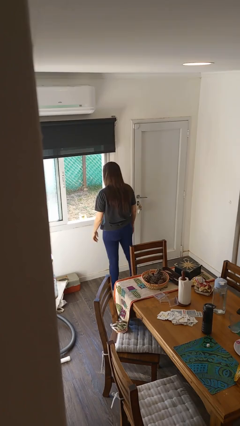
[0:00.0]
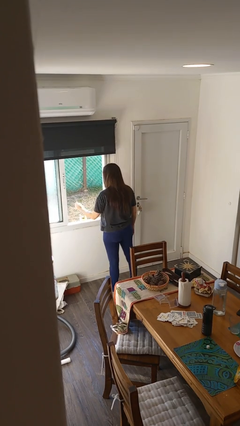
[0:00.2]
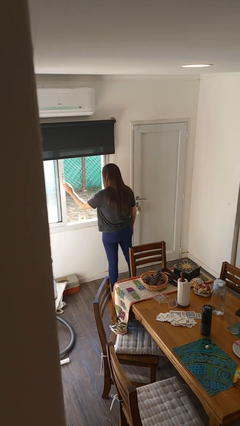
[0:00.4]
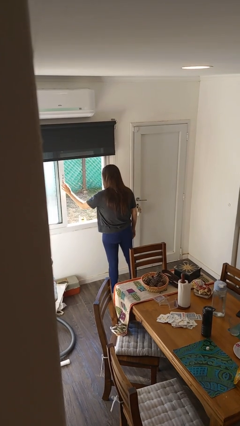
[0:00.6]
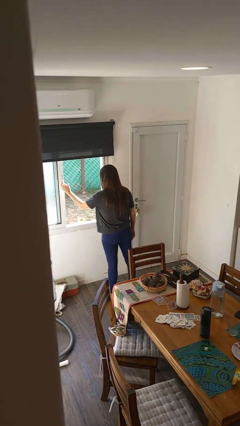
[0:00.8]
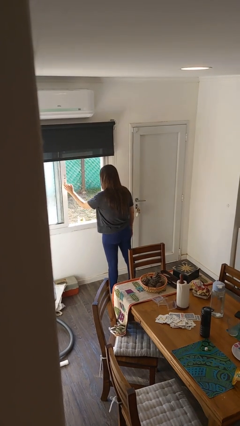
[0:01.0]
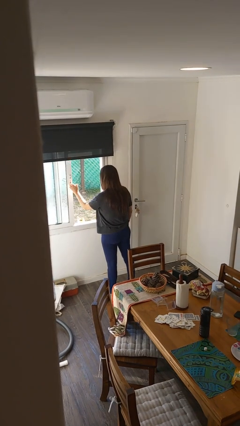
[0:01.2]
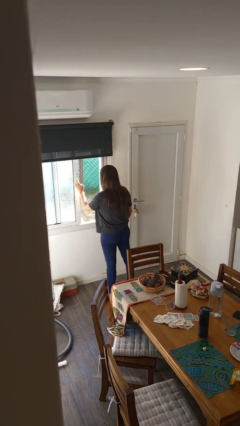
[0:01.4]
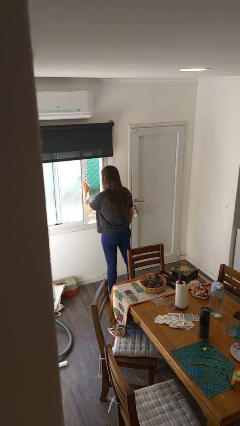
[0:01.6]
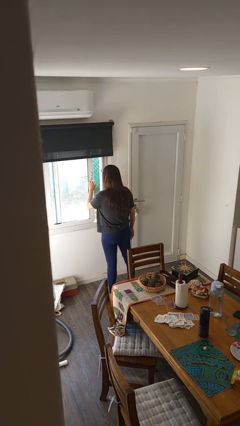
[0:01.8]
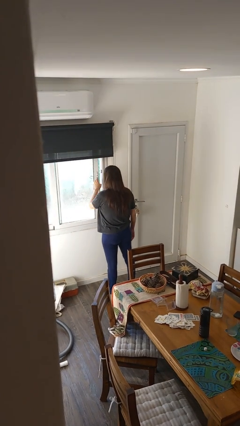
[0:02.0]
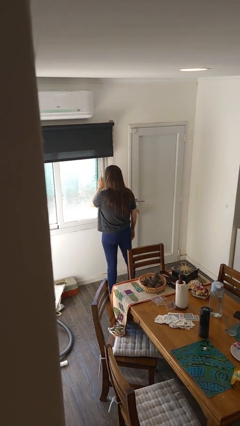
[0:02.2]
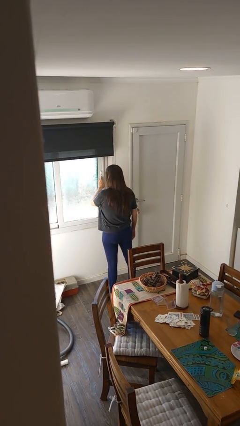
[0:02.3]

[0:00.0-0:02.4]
person closes home window

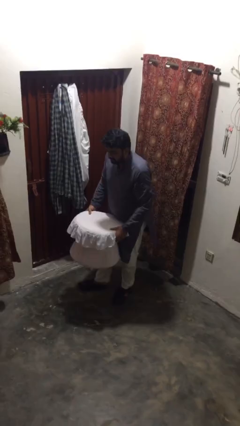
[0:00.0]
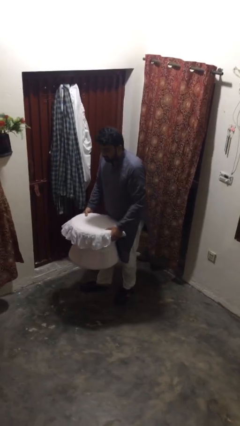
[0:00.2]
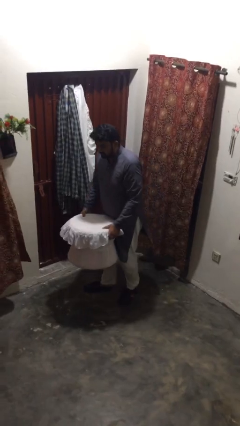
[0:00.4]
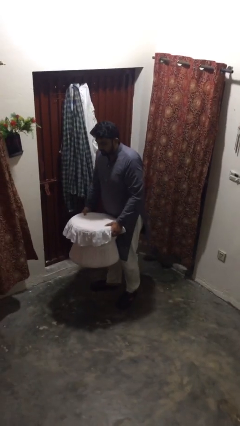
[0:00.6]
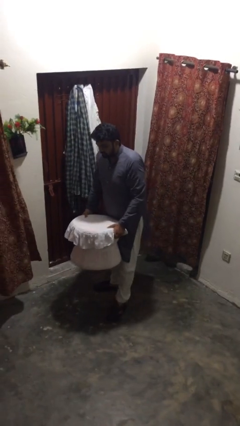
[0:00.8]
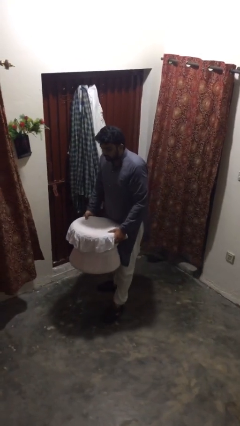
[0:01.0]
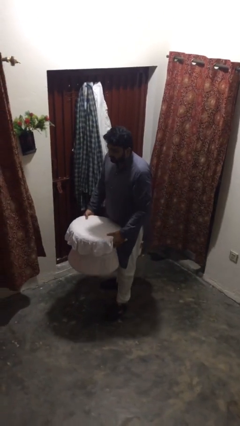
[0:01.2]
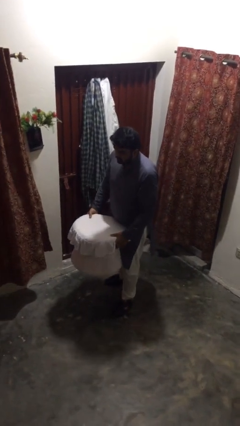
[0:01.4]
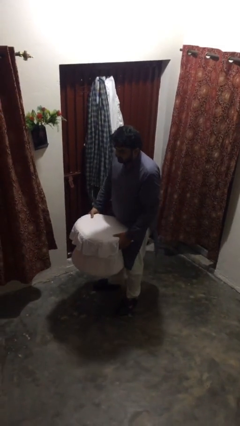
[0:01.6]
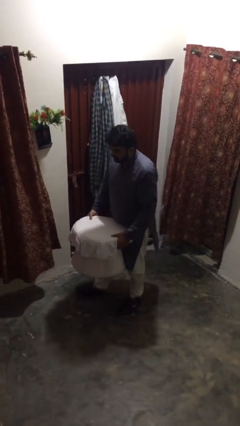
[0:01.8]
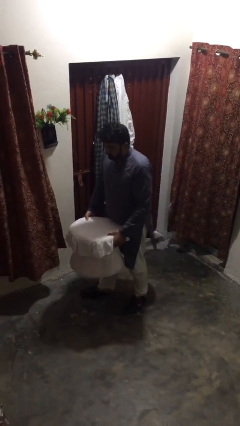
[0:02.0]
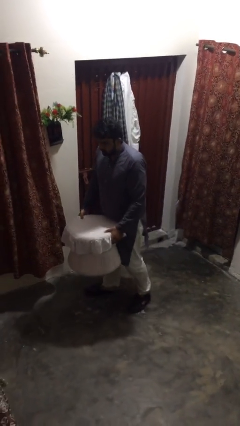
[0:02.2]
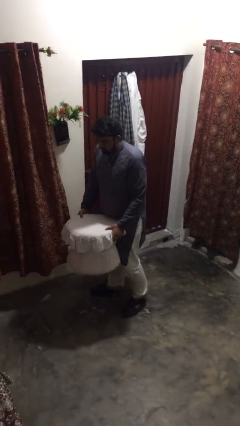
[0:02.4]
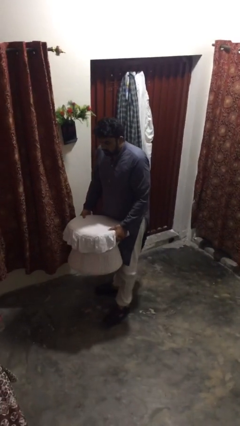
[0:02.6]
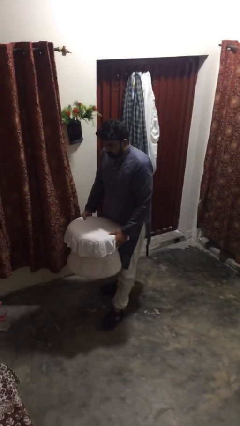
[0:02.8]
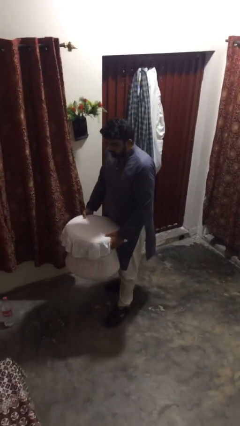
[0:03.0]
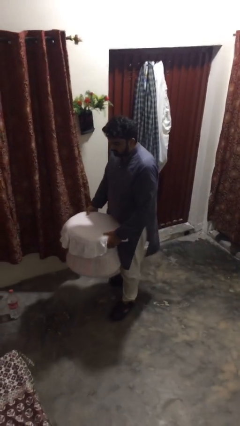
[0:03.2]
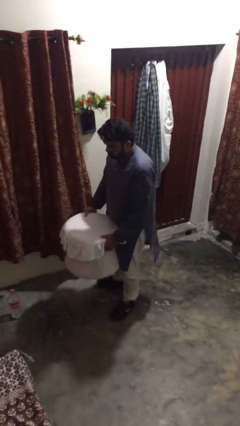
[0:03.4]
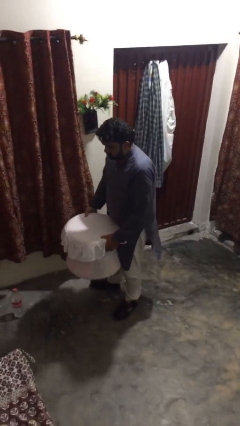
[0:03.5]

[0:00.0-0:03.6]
person carries heavy object

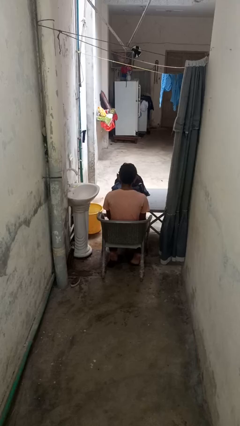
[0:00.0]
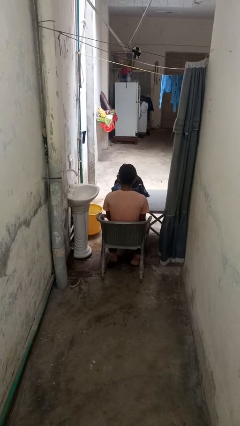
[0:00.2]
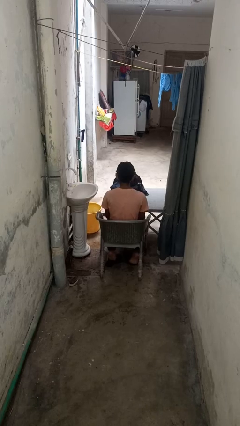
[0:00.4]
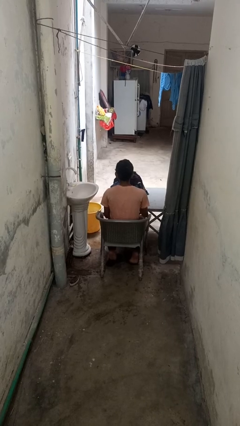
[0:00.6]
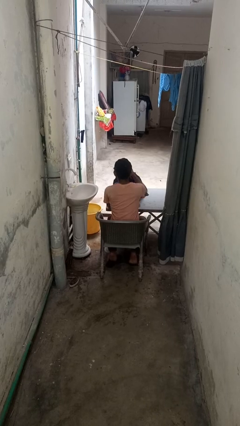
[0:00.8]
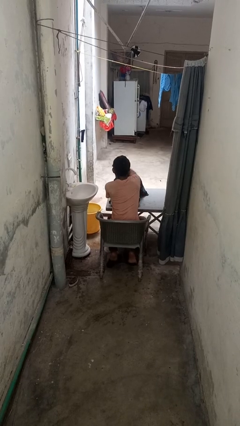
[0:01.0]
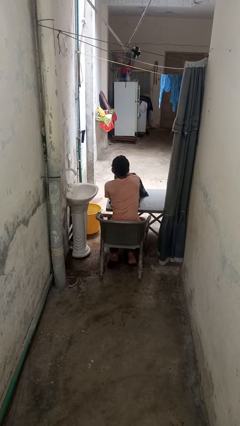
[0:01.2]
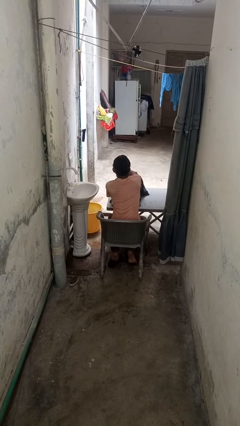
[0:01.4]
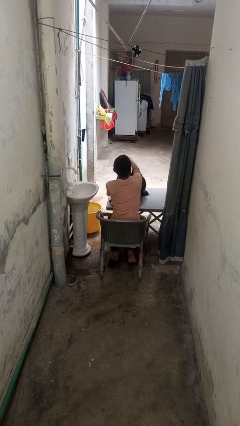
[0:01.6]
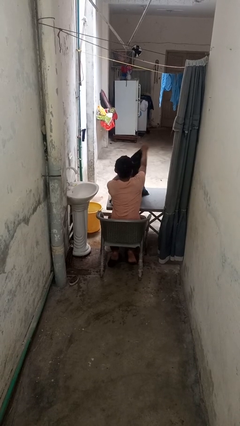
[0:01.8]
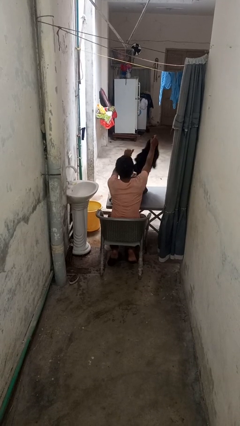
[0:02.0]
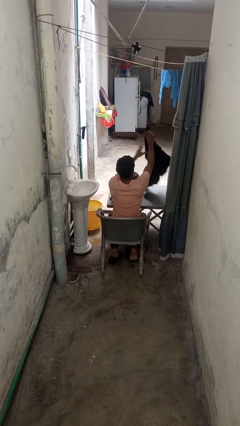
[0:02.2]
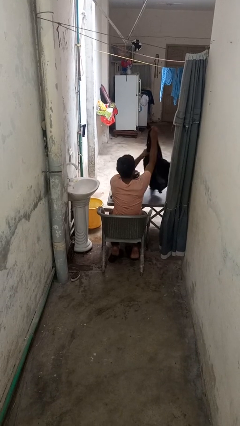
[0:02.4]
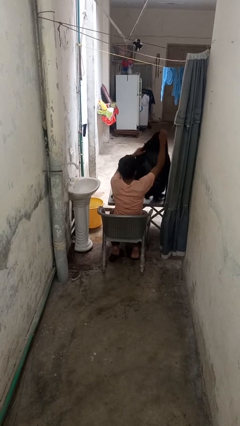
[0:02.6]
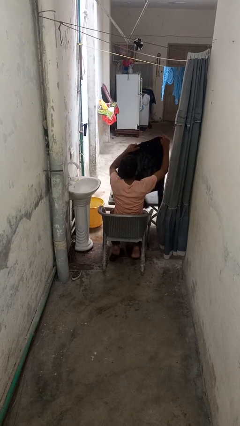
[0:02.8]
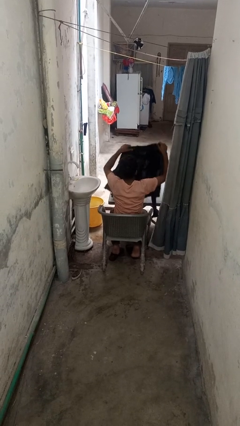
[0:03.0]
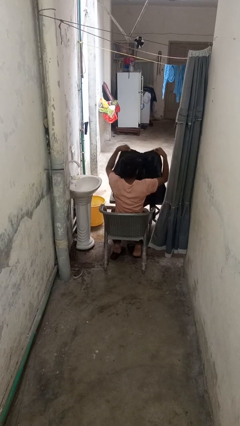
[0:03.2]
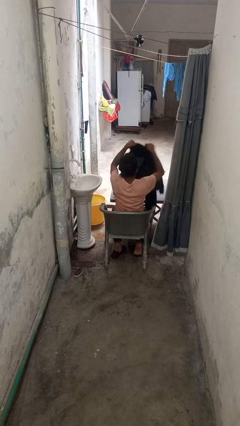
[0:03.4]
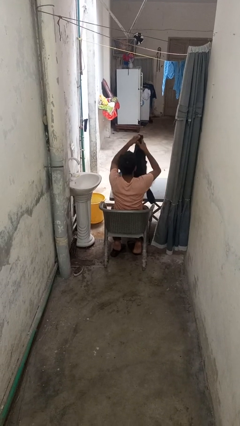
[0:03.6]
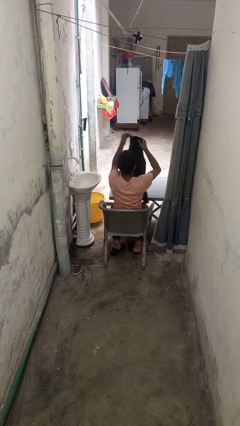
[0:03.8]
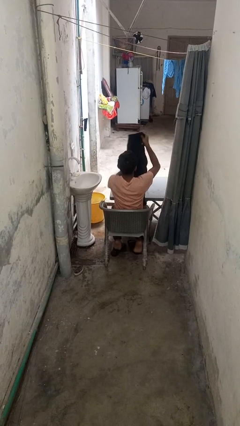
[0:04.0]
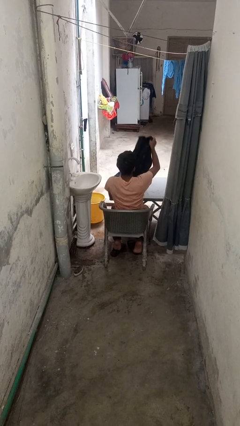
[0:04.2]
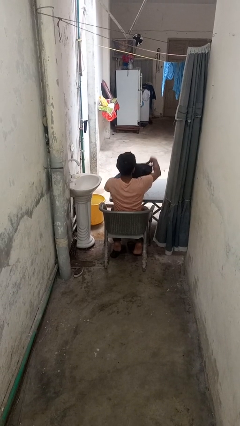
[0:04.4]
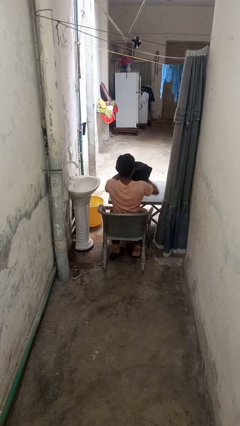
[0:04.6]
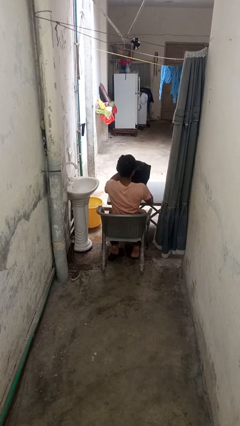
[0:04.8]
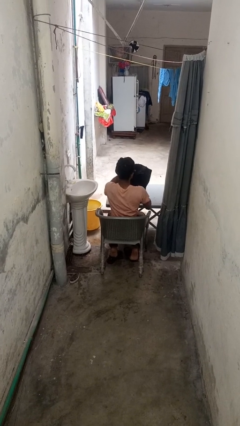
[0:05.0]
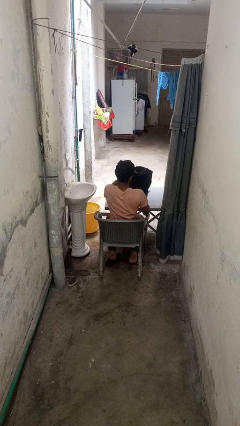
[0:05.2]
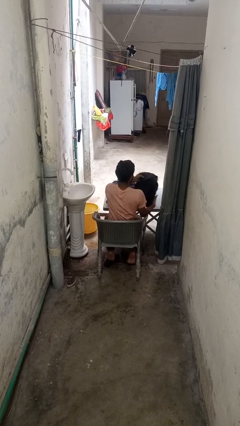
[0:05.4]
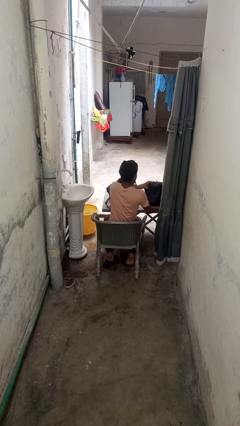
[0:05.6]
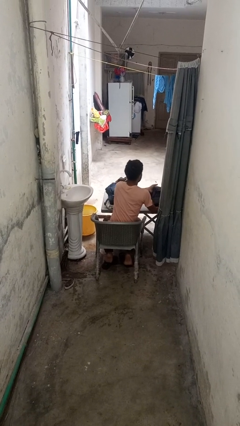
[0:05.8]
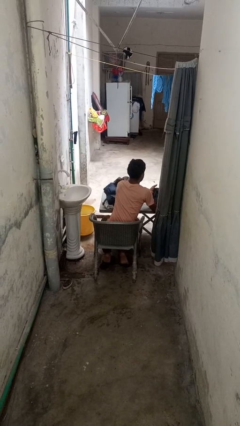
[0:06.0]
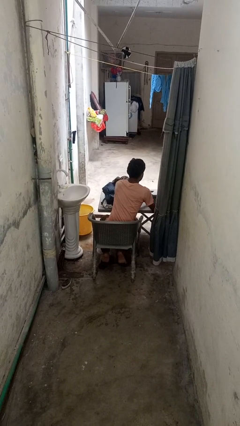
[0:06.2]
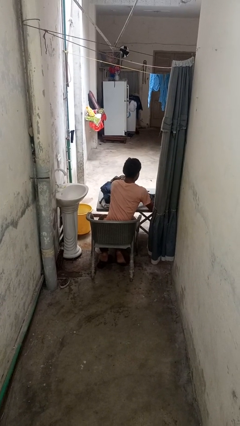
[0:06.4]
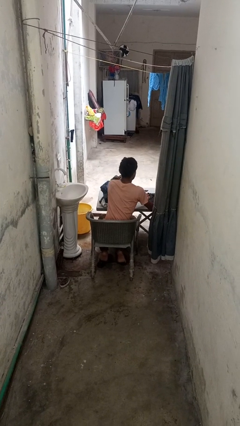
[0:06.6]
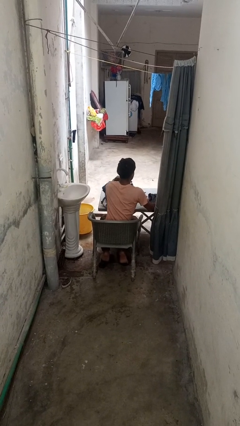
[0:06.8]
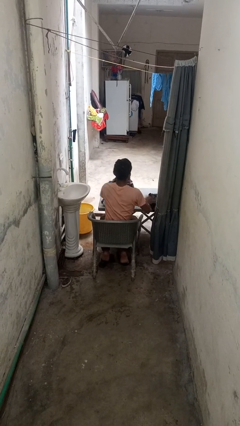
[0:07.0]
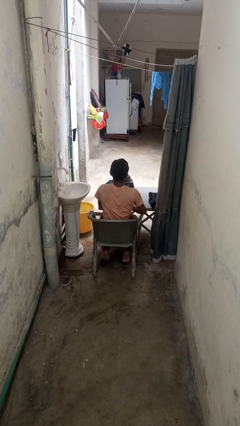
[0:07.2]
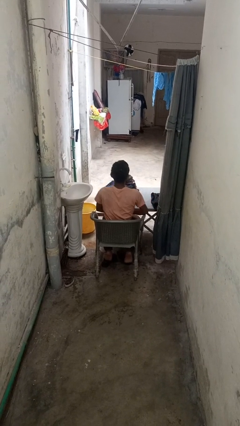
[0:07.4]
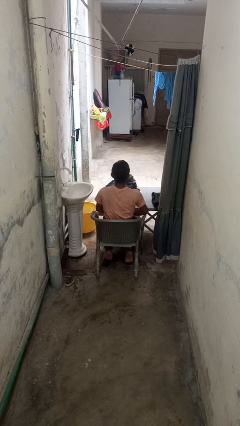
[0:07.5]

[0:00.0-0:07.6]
person folds shirt

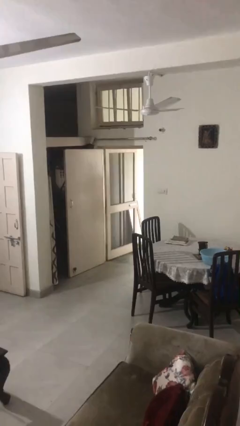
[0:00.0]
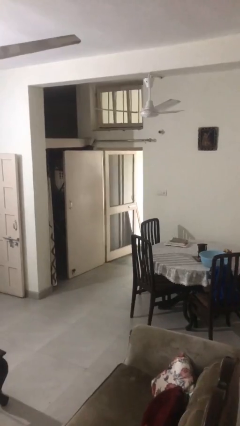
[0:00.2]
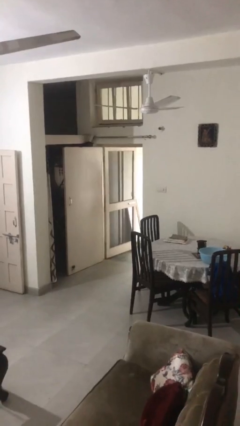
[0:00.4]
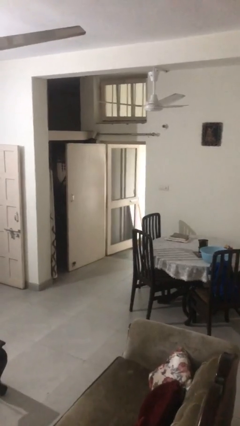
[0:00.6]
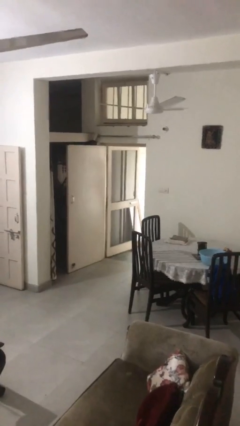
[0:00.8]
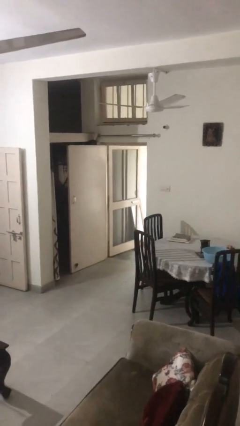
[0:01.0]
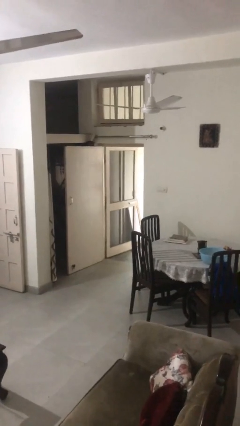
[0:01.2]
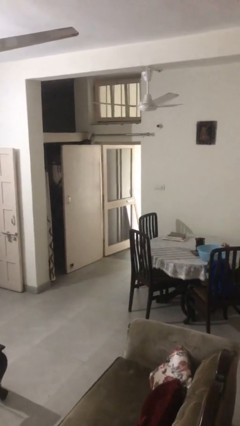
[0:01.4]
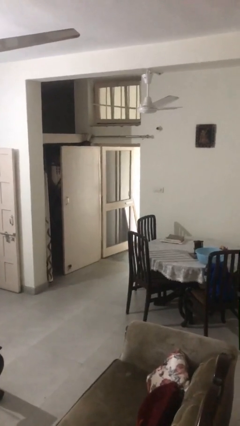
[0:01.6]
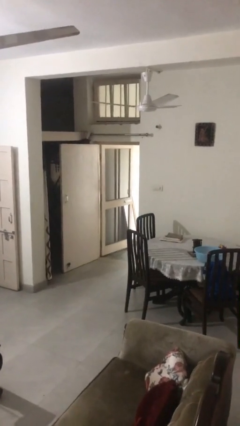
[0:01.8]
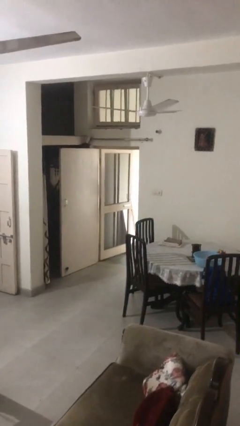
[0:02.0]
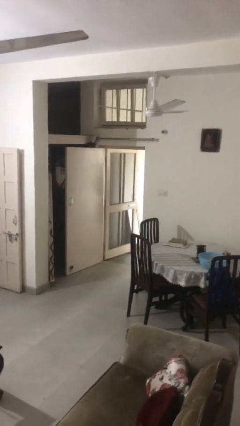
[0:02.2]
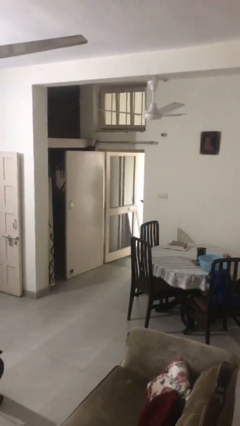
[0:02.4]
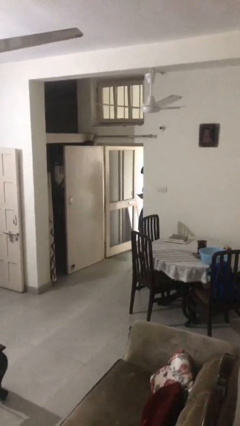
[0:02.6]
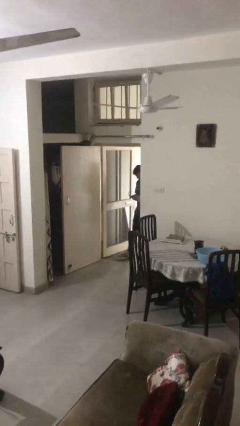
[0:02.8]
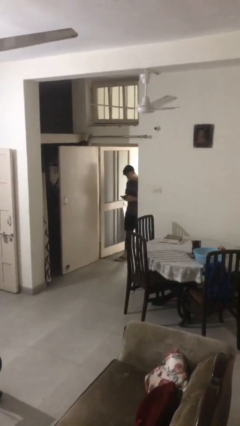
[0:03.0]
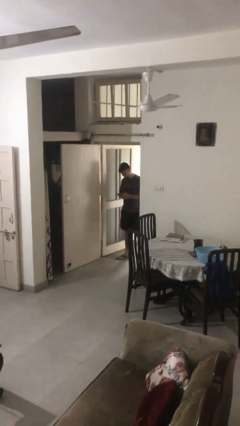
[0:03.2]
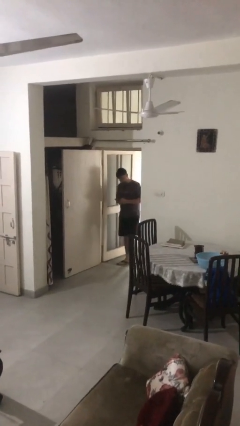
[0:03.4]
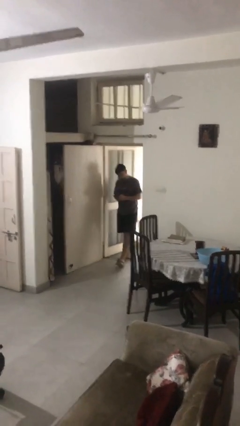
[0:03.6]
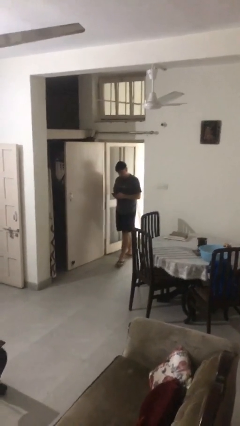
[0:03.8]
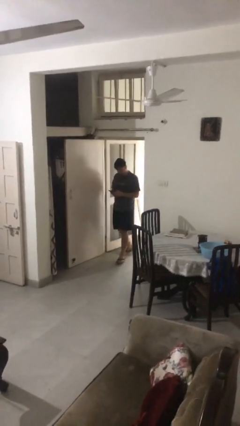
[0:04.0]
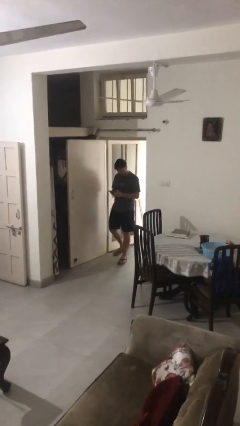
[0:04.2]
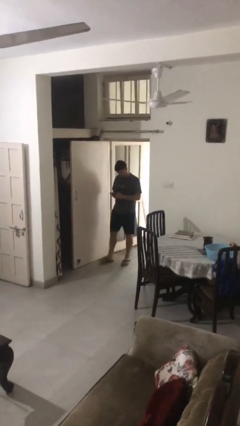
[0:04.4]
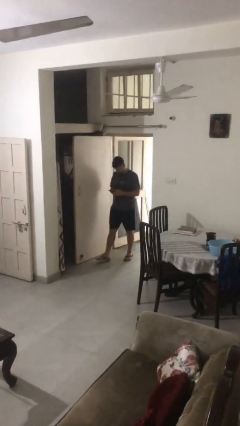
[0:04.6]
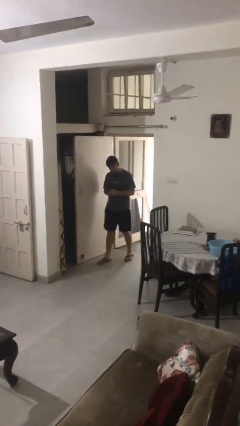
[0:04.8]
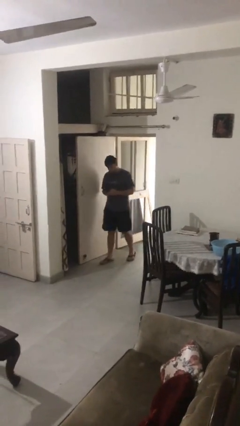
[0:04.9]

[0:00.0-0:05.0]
person enters scene through structure
